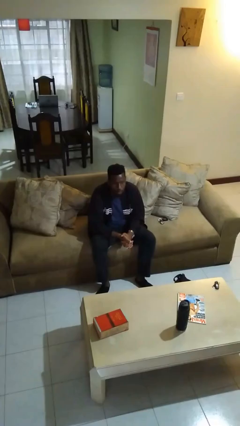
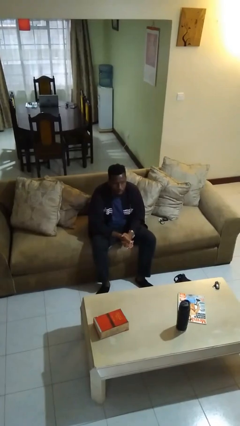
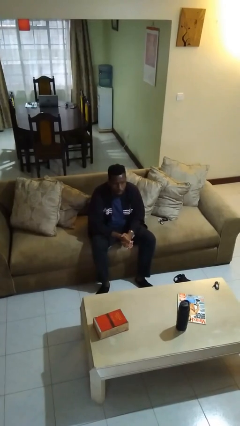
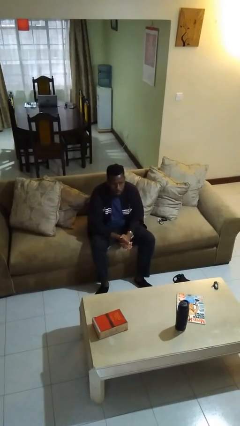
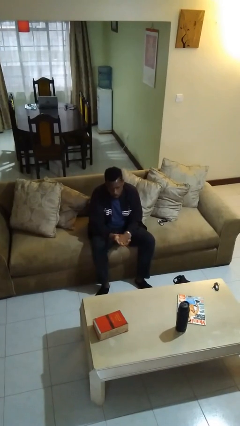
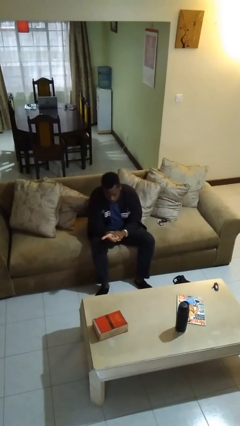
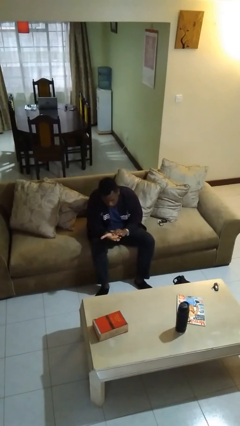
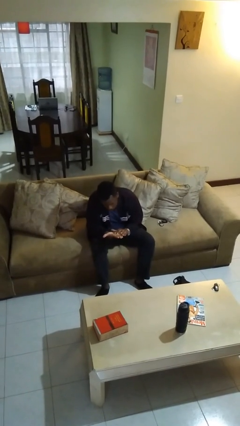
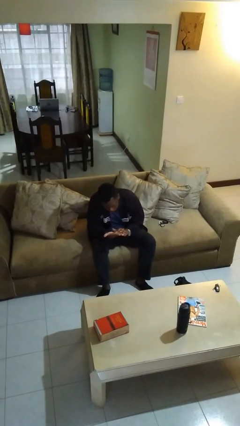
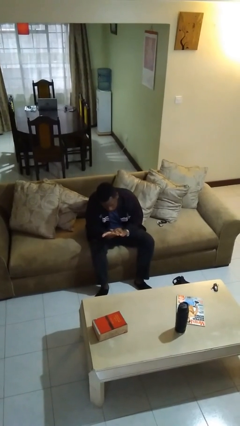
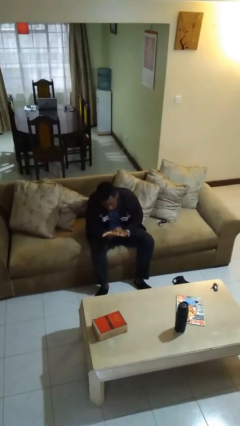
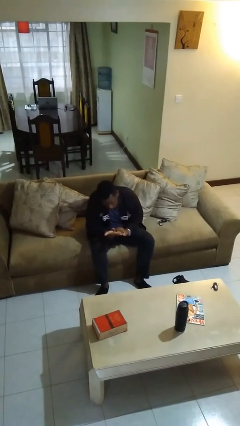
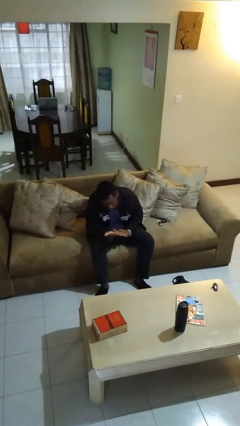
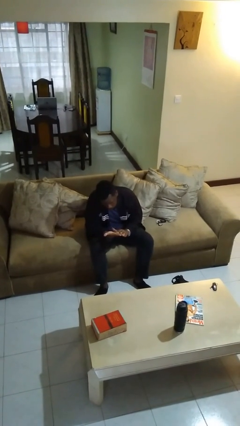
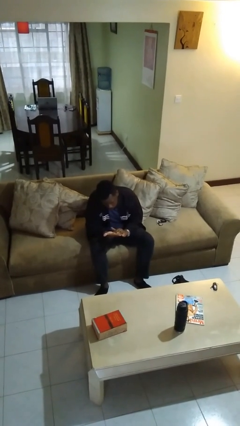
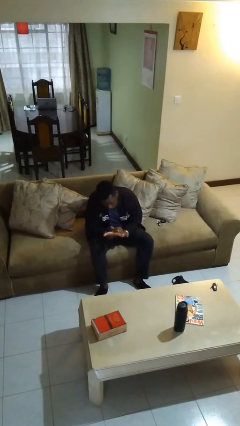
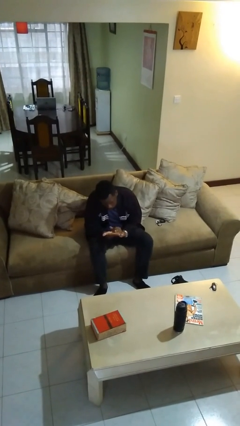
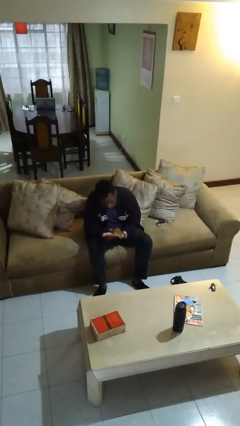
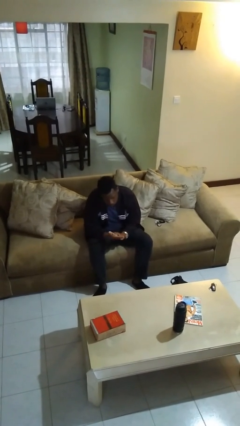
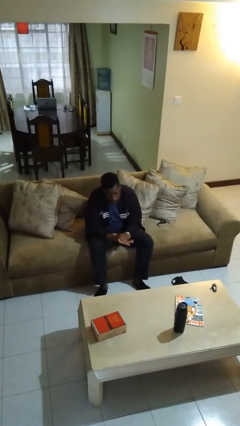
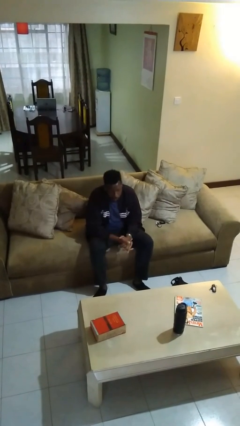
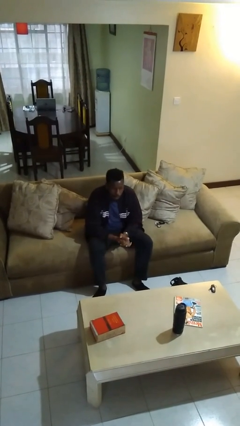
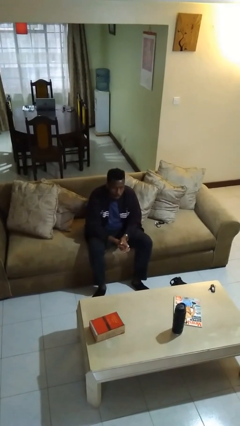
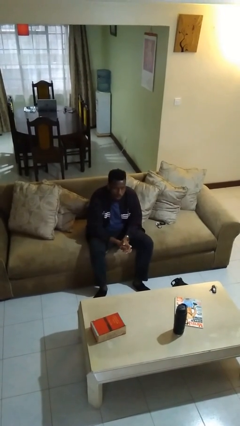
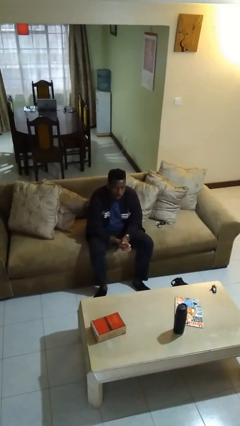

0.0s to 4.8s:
person looks at hands in lap

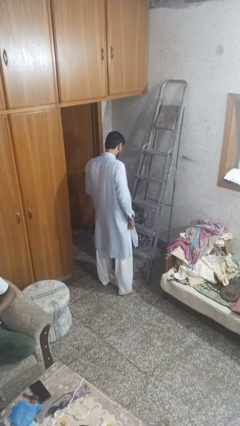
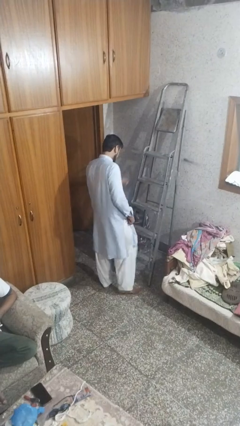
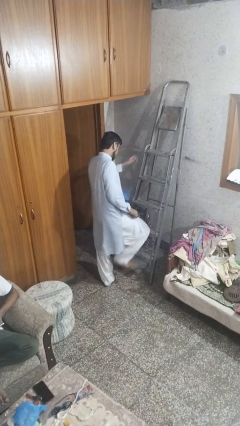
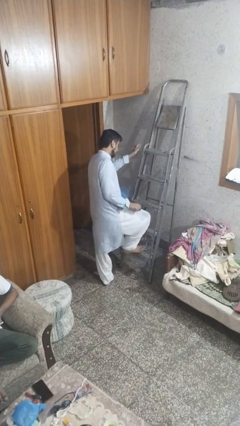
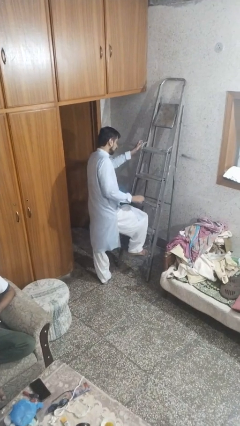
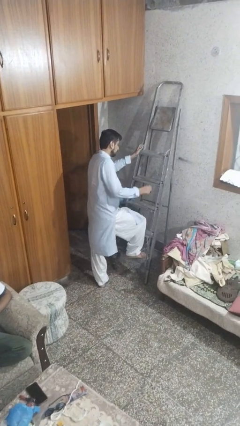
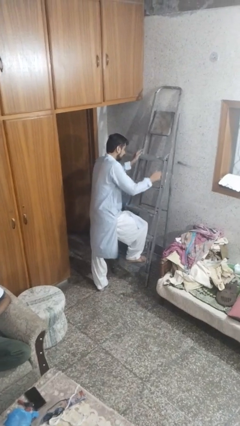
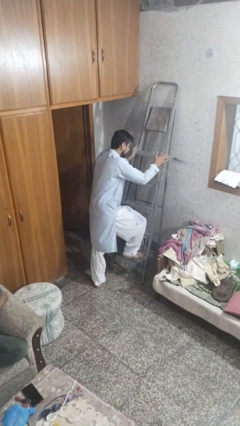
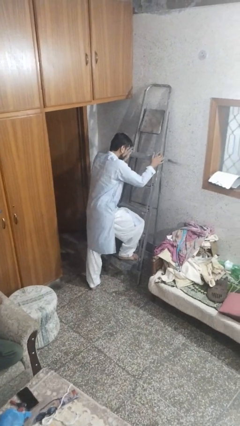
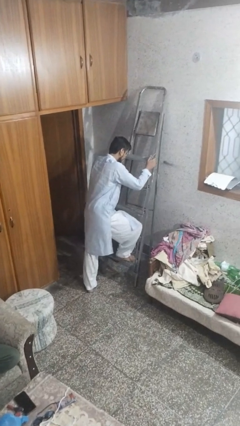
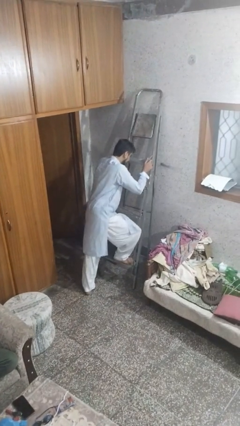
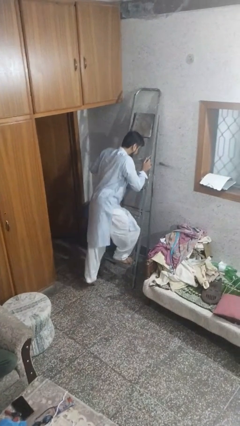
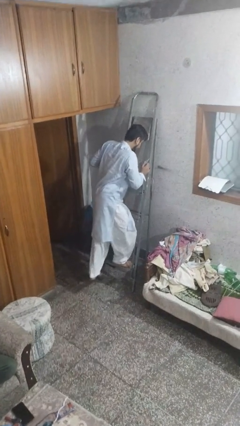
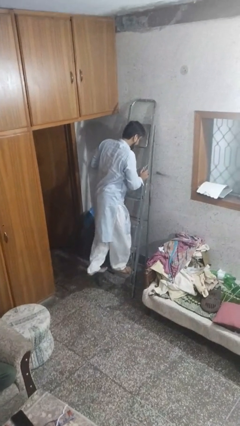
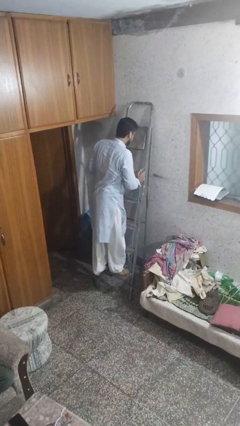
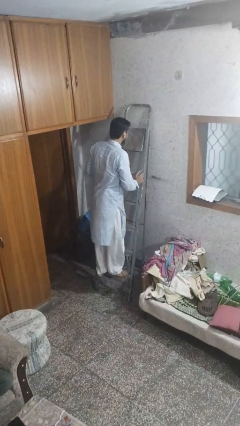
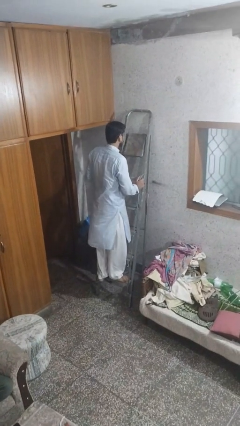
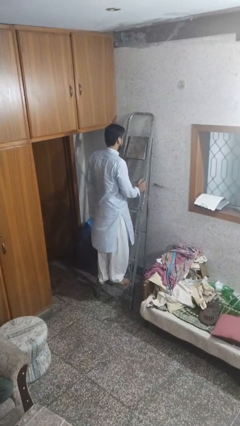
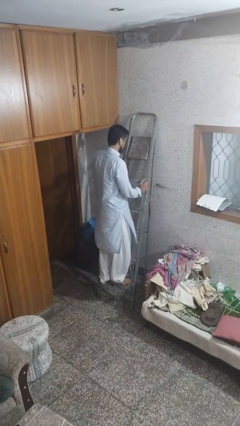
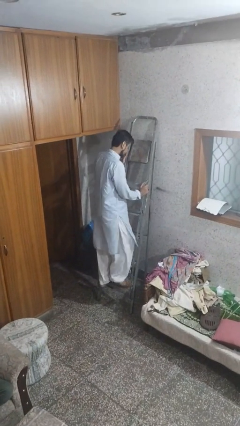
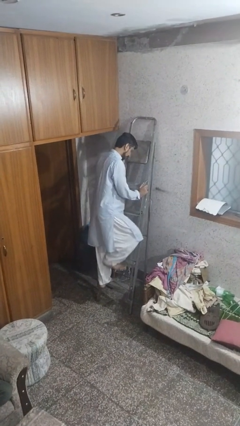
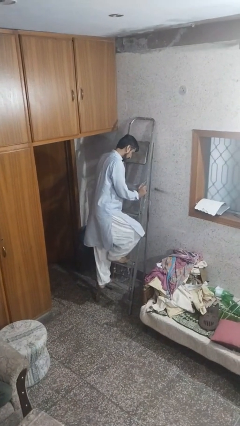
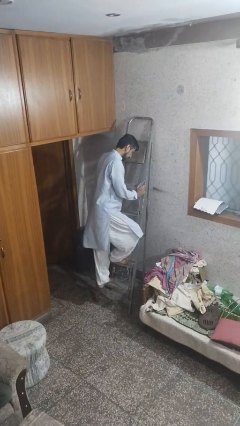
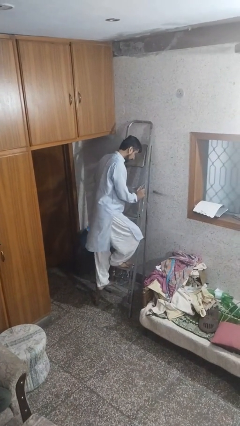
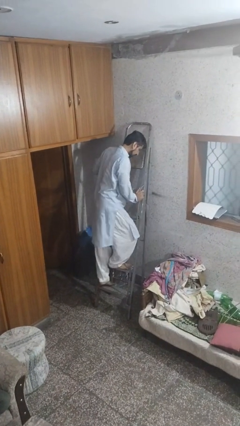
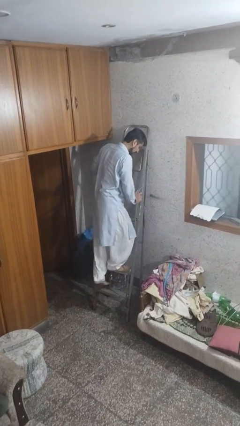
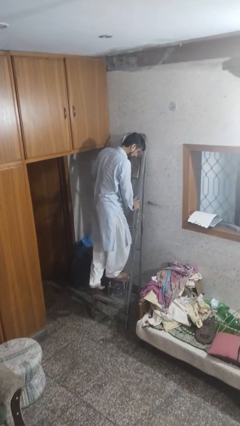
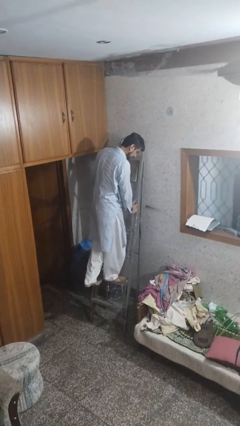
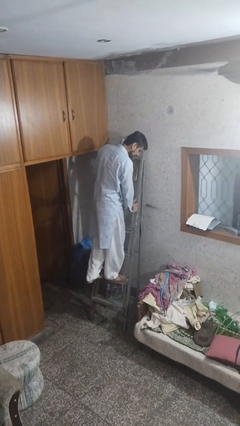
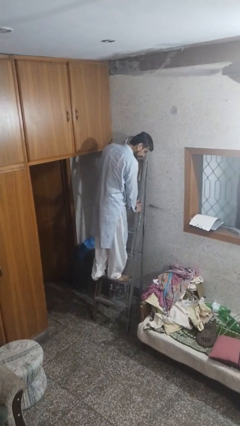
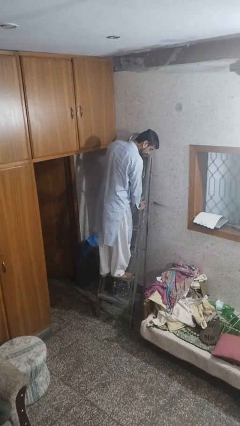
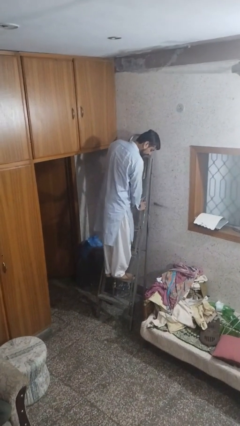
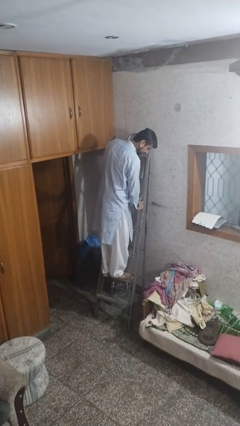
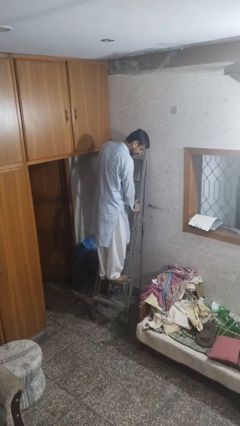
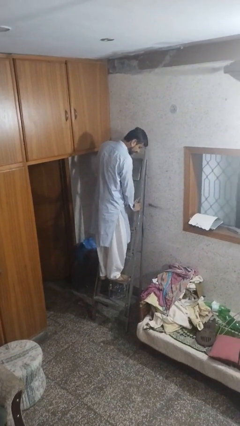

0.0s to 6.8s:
person climbs up ladder

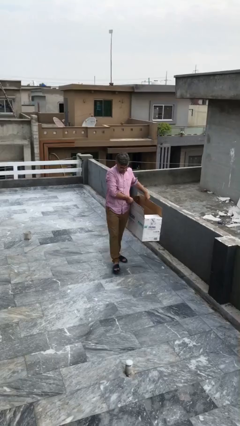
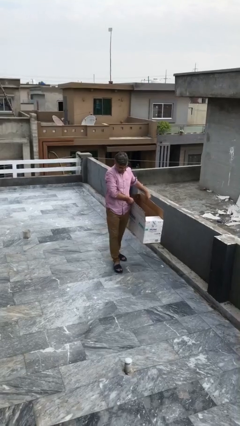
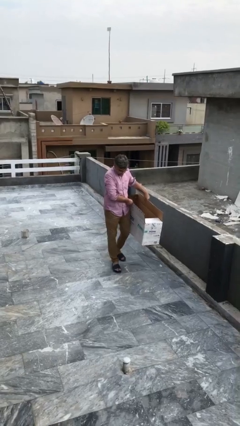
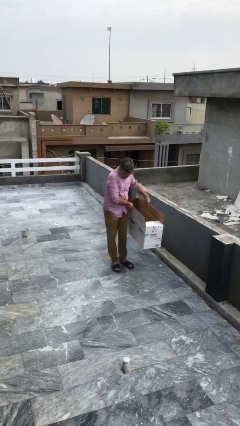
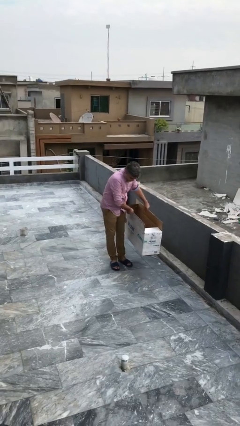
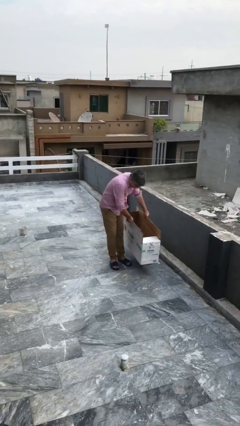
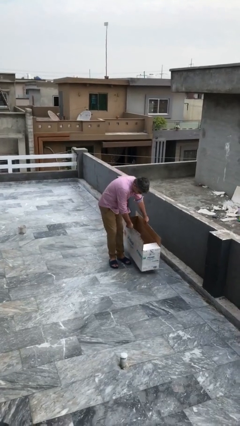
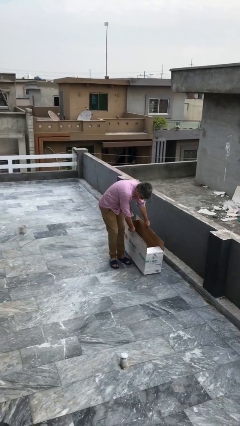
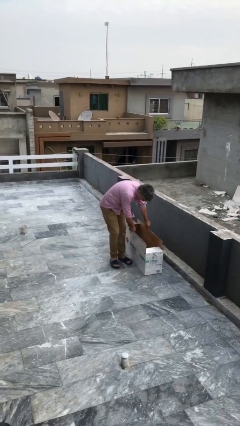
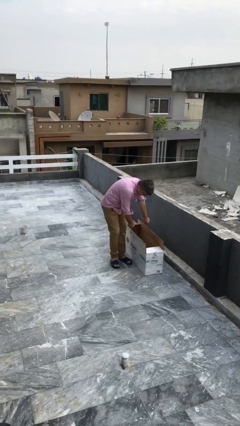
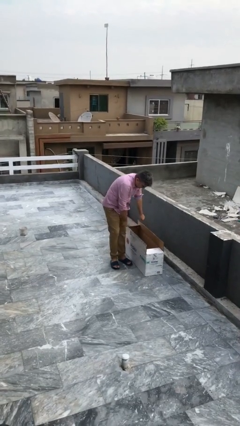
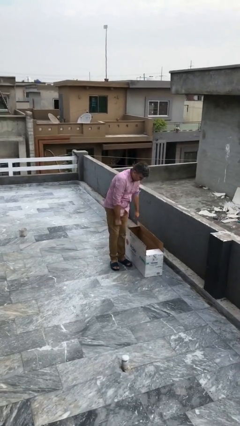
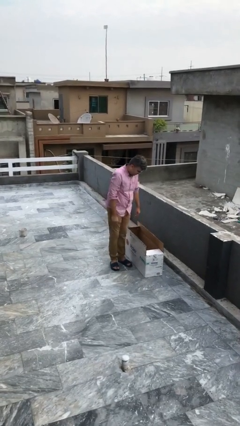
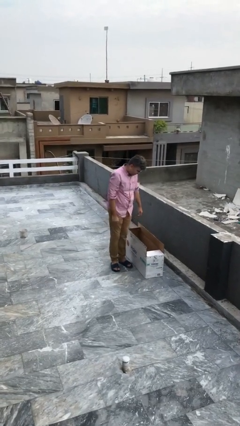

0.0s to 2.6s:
person puts down object on floor

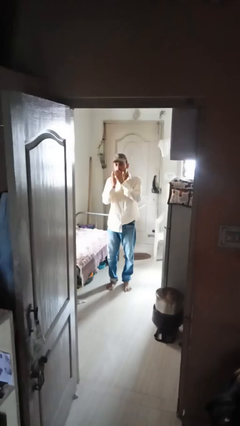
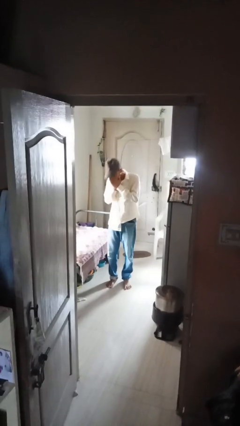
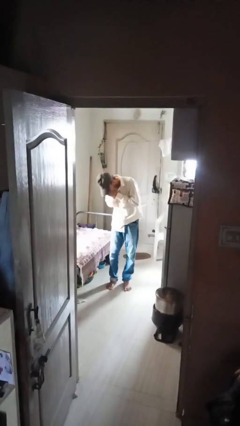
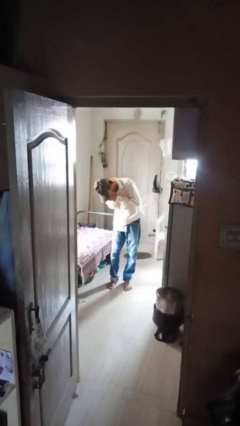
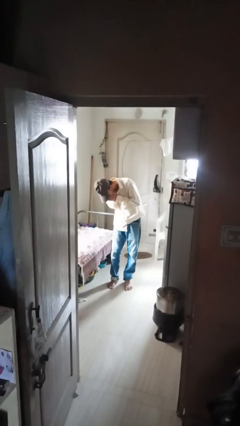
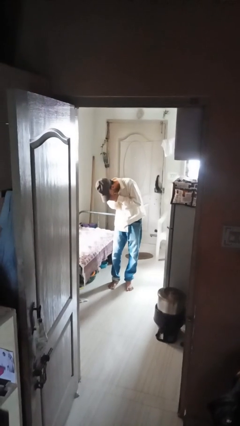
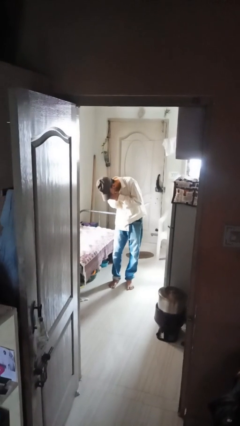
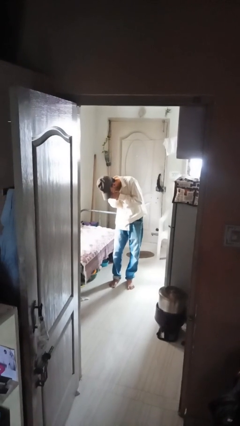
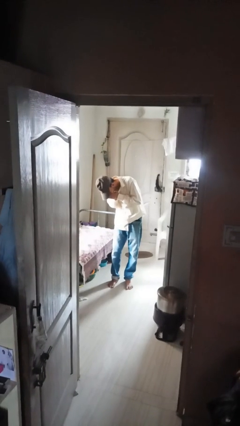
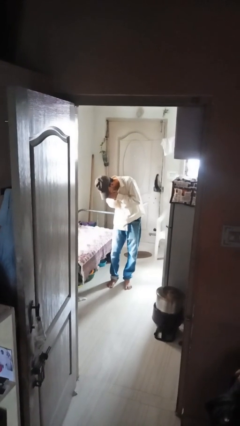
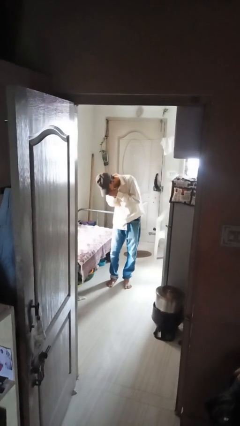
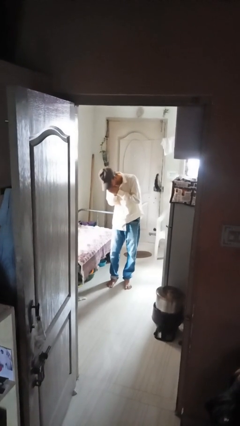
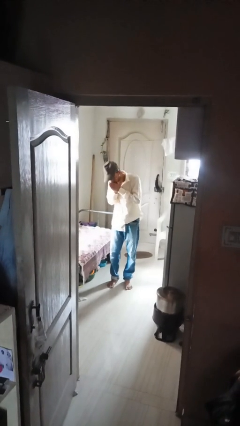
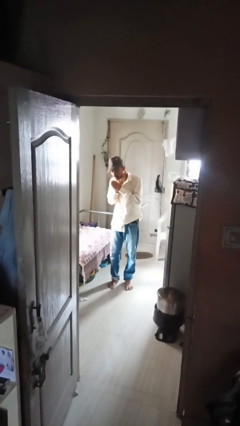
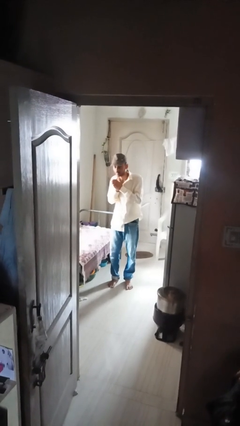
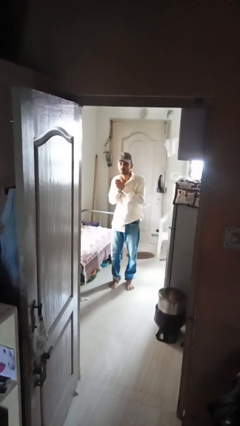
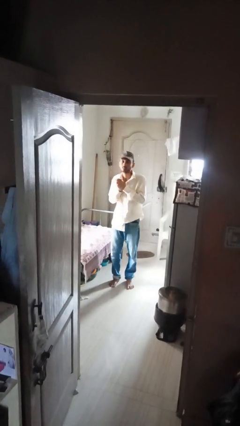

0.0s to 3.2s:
person sneezes into hand
